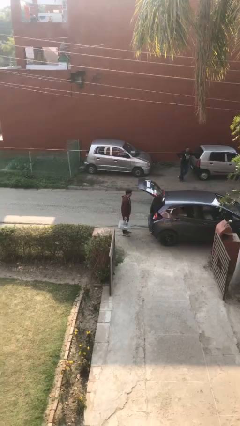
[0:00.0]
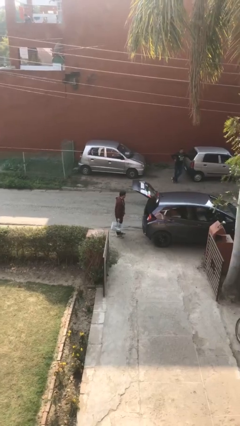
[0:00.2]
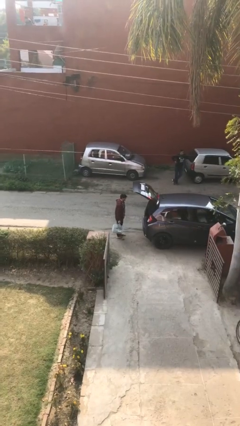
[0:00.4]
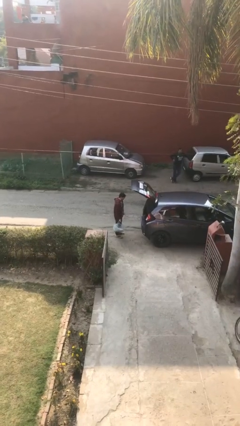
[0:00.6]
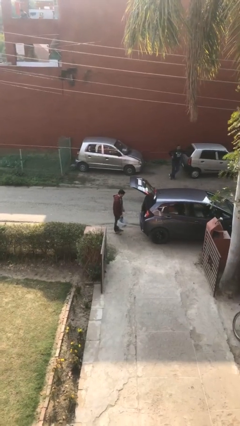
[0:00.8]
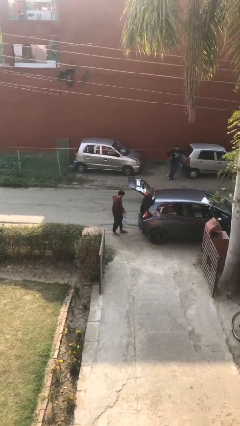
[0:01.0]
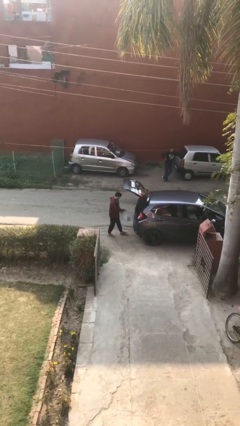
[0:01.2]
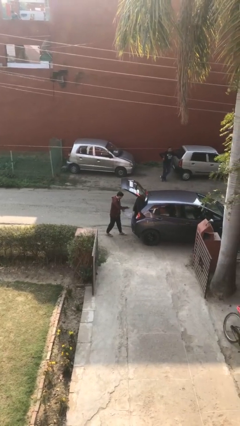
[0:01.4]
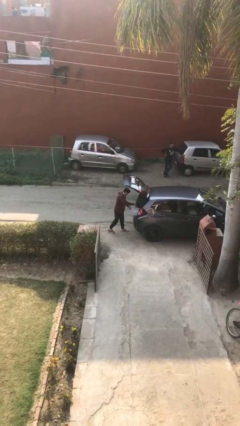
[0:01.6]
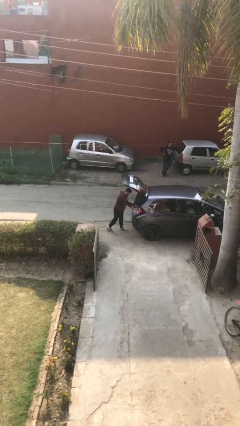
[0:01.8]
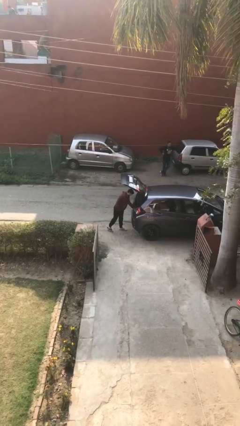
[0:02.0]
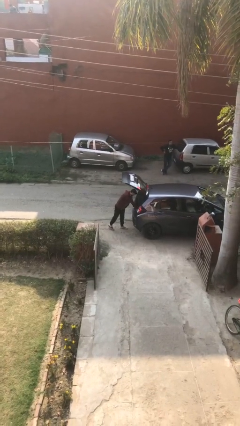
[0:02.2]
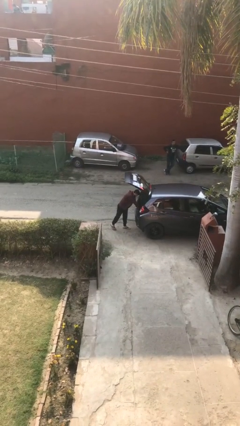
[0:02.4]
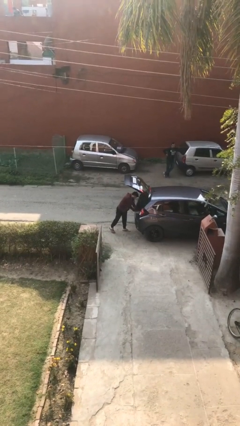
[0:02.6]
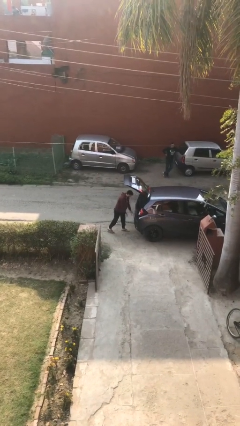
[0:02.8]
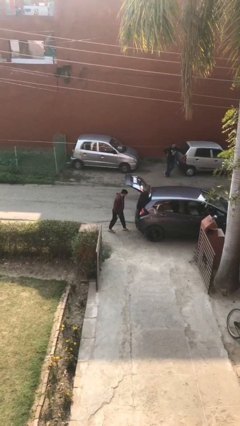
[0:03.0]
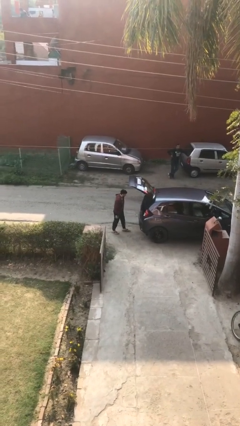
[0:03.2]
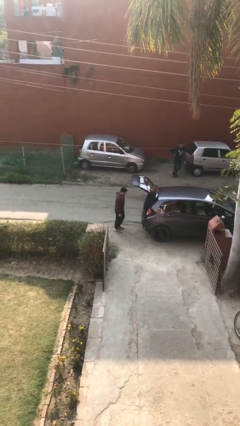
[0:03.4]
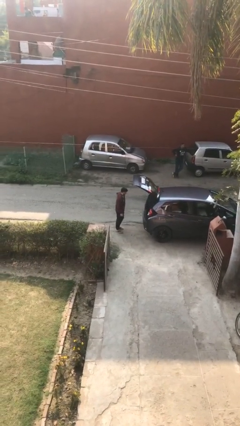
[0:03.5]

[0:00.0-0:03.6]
person loads car

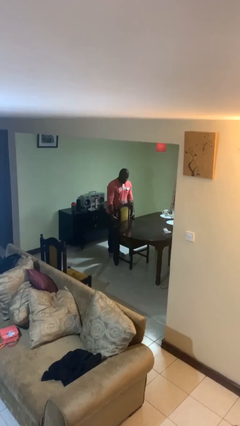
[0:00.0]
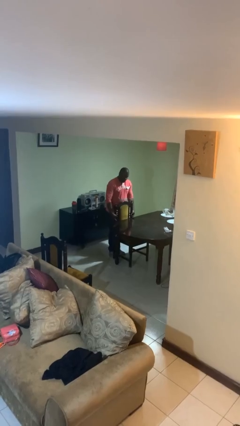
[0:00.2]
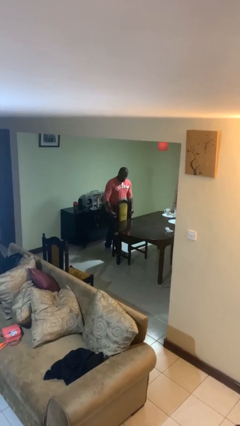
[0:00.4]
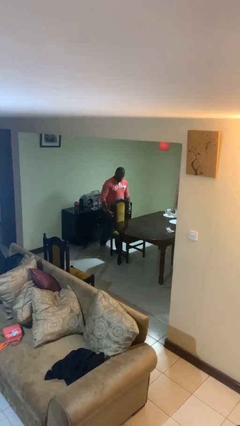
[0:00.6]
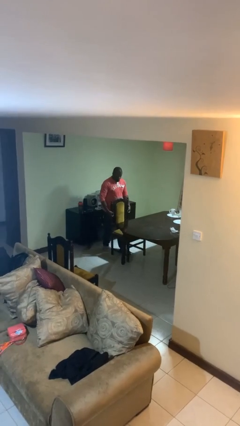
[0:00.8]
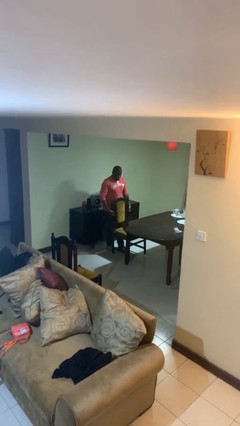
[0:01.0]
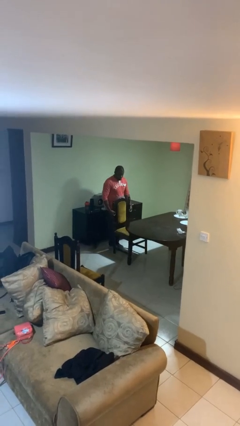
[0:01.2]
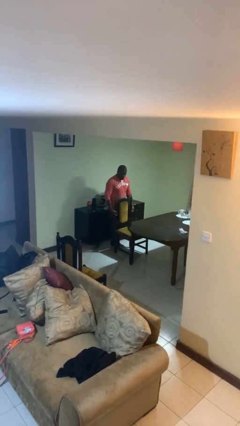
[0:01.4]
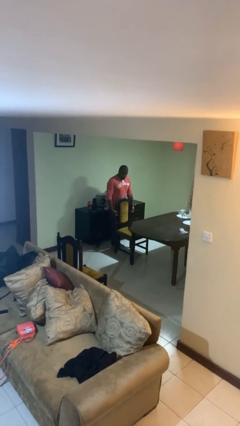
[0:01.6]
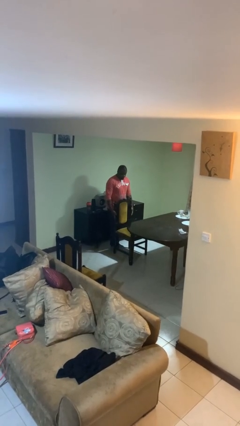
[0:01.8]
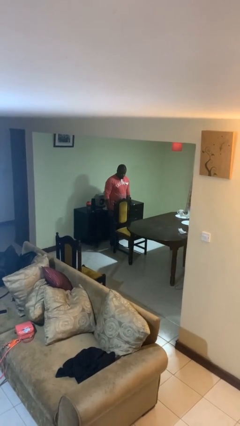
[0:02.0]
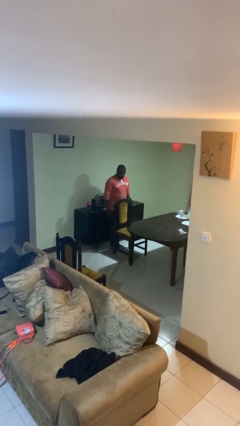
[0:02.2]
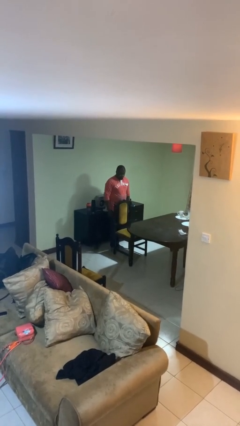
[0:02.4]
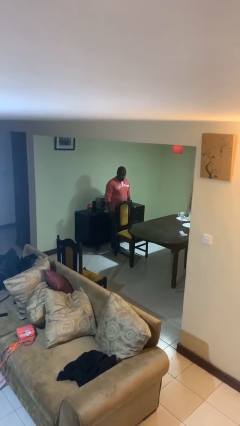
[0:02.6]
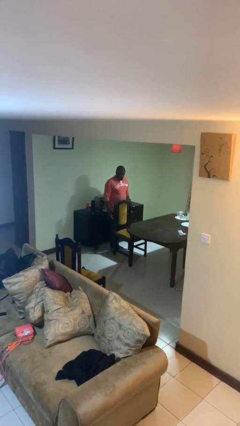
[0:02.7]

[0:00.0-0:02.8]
person pulls out chair

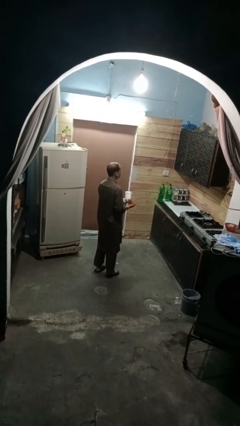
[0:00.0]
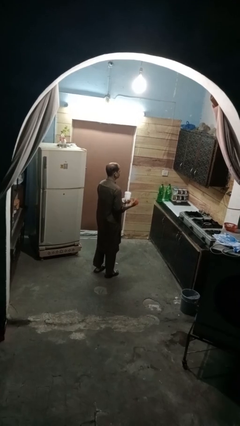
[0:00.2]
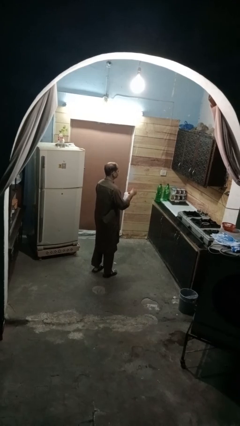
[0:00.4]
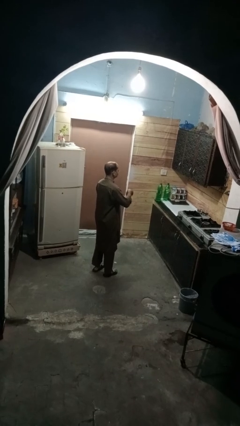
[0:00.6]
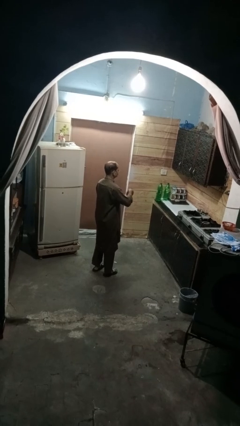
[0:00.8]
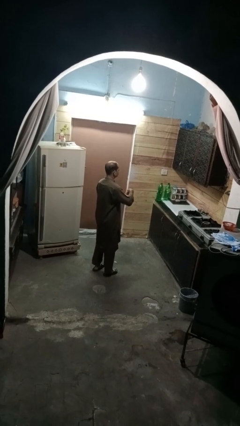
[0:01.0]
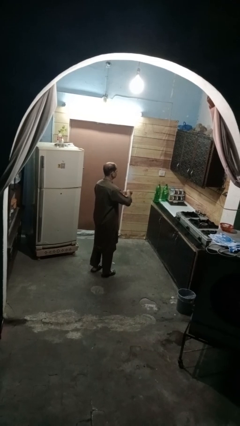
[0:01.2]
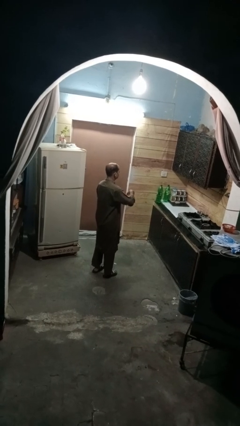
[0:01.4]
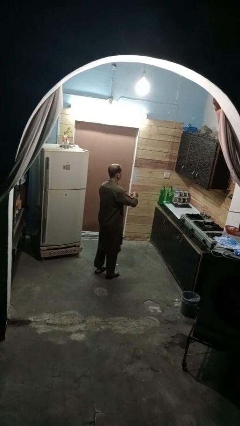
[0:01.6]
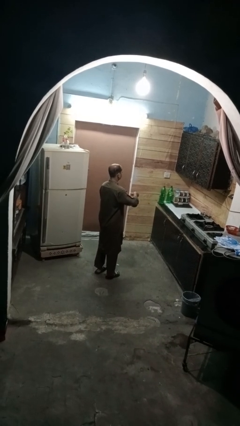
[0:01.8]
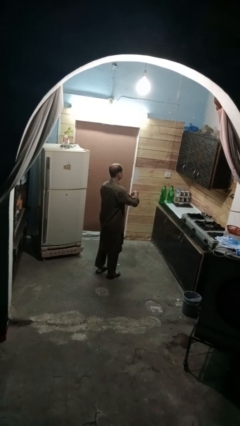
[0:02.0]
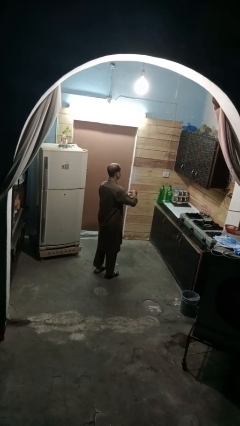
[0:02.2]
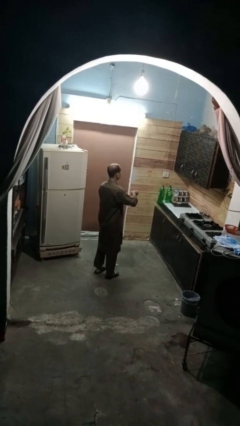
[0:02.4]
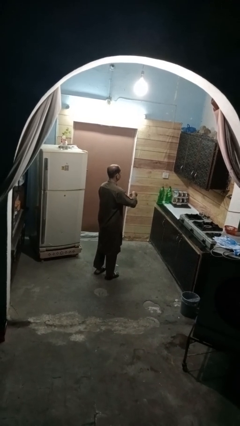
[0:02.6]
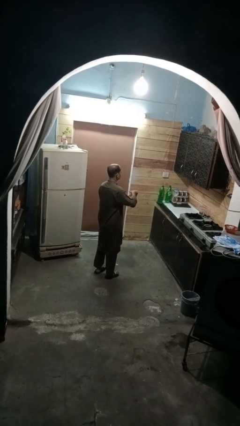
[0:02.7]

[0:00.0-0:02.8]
person closes jar

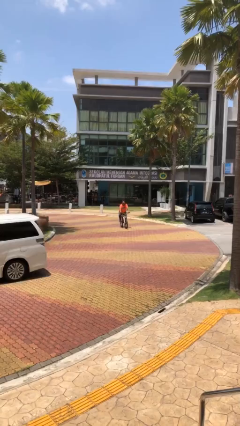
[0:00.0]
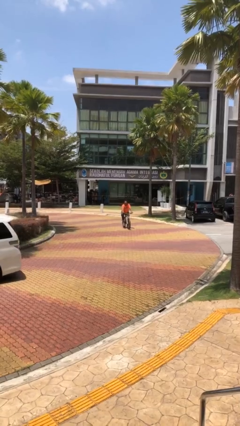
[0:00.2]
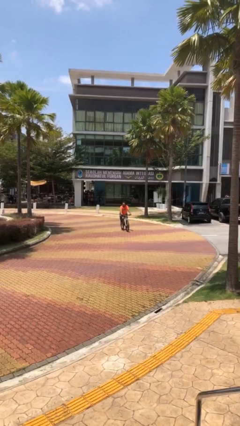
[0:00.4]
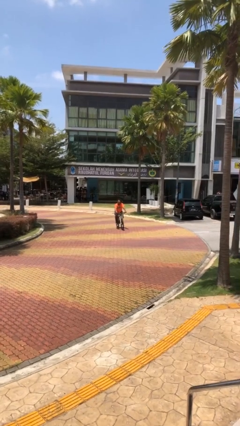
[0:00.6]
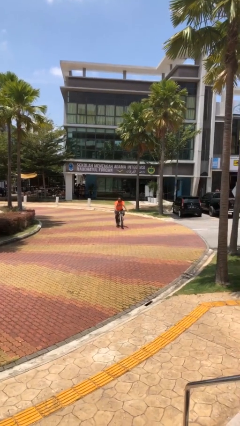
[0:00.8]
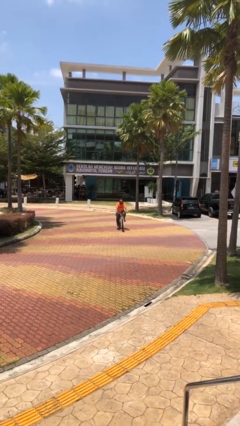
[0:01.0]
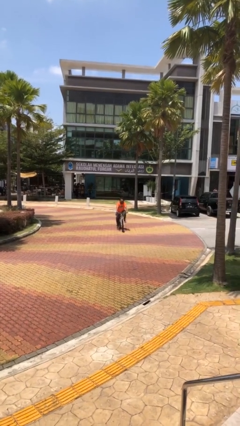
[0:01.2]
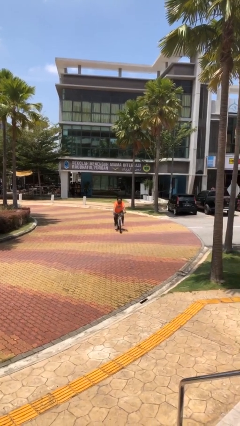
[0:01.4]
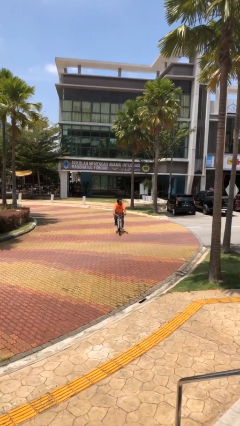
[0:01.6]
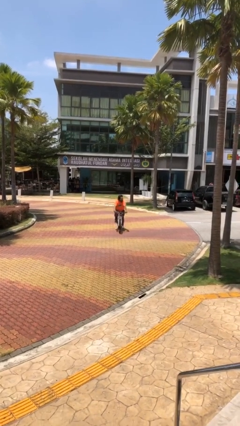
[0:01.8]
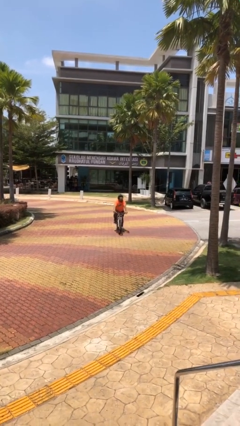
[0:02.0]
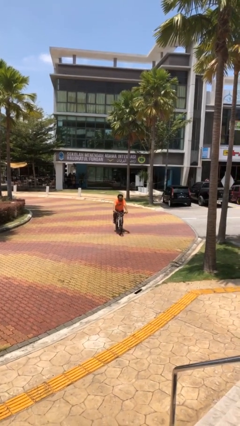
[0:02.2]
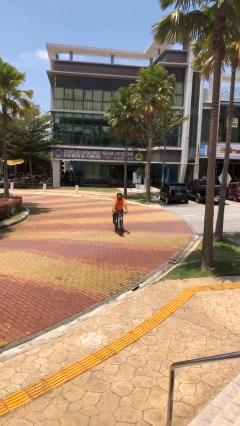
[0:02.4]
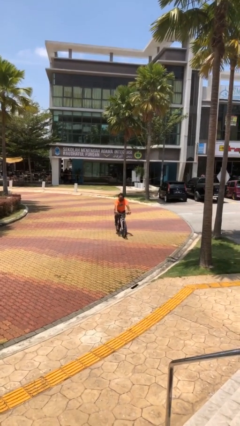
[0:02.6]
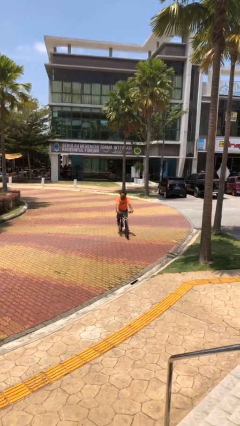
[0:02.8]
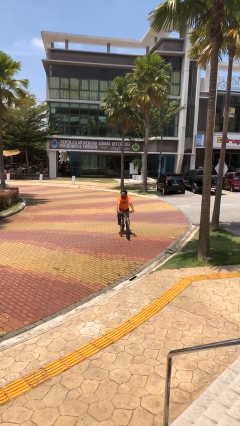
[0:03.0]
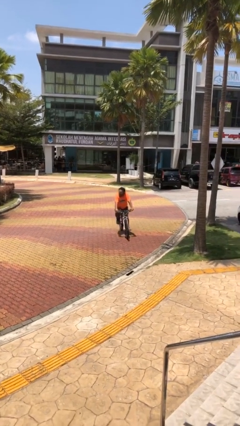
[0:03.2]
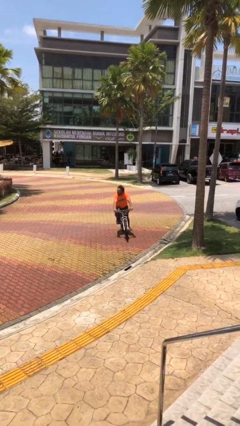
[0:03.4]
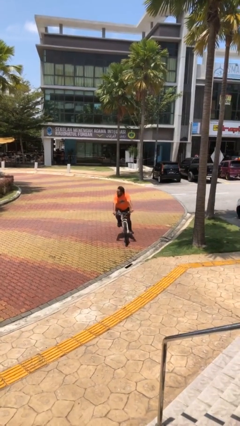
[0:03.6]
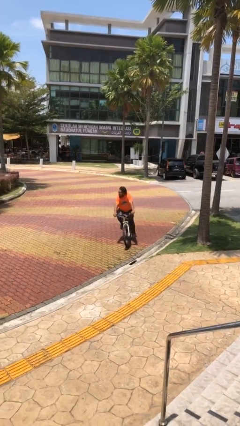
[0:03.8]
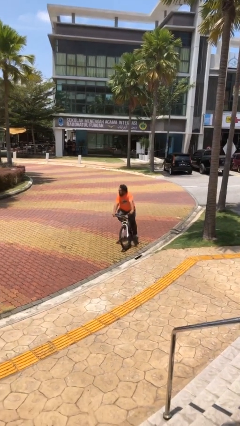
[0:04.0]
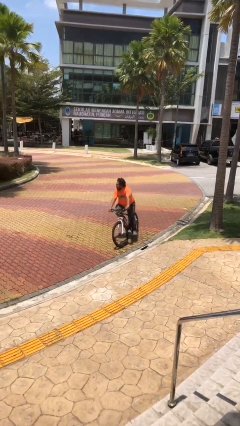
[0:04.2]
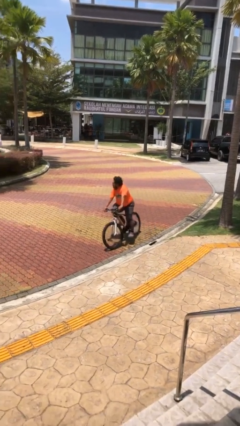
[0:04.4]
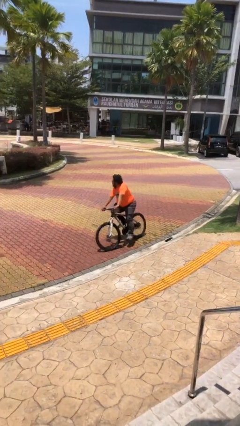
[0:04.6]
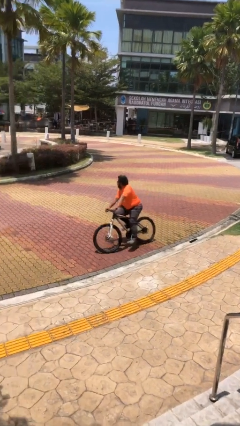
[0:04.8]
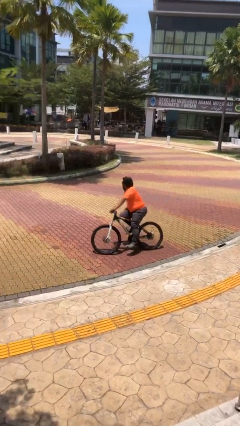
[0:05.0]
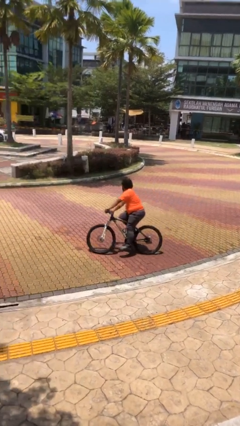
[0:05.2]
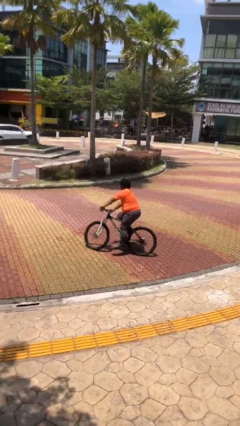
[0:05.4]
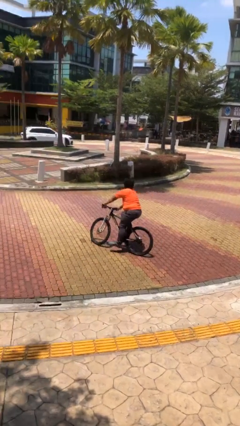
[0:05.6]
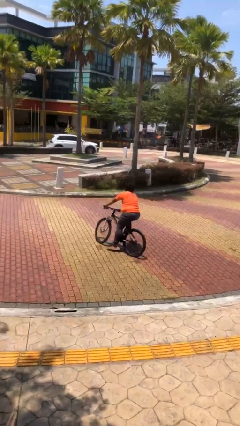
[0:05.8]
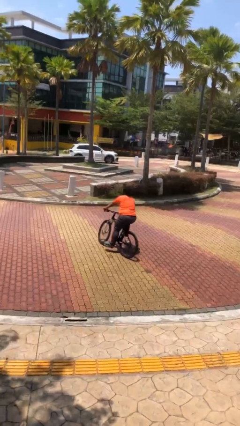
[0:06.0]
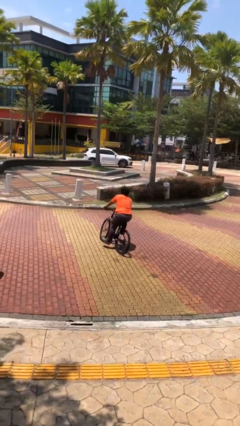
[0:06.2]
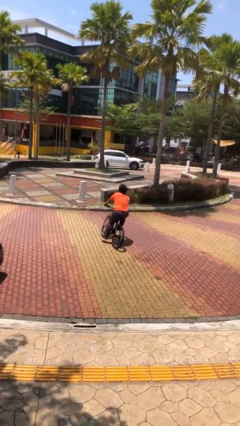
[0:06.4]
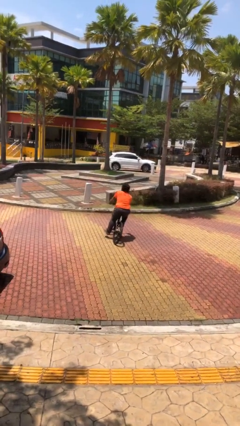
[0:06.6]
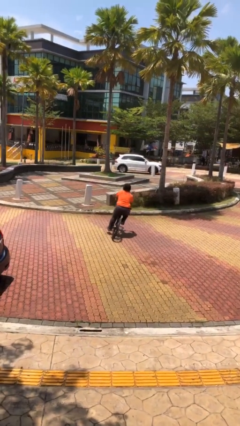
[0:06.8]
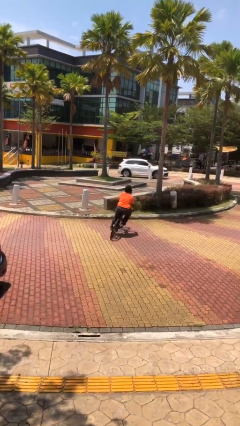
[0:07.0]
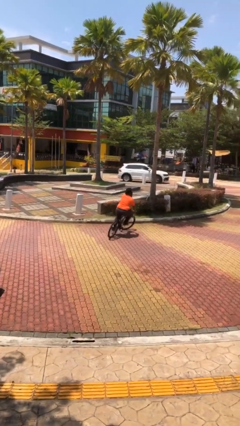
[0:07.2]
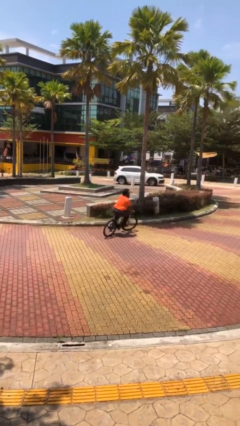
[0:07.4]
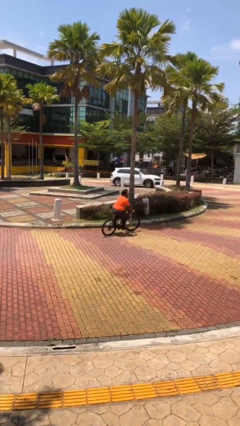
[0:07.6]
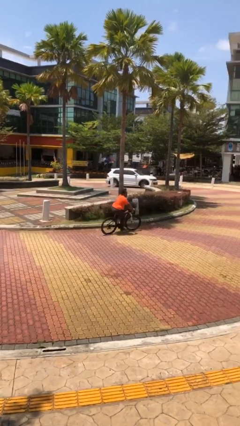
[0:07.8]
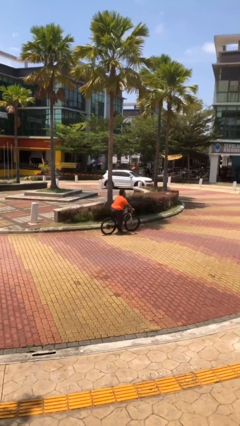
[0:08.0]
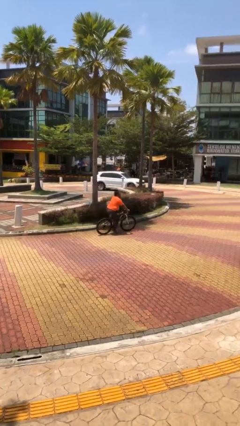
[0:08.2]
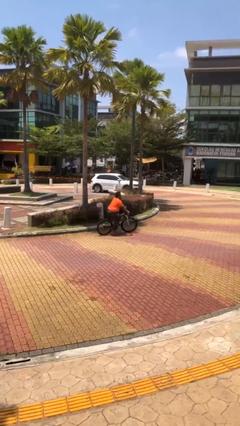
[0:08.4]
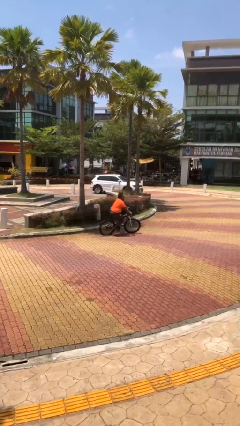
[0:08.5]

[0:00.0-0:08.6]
person rides bicycle
